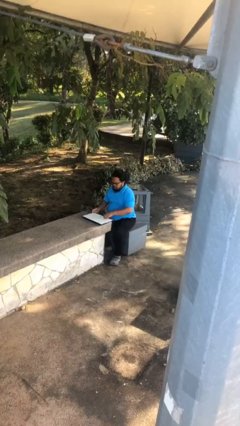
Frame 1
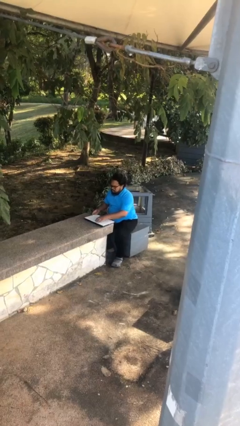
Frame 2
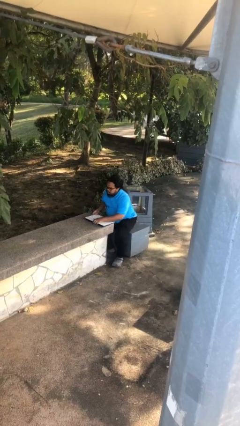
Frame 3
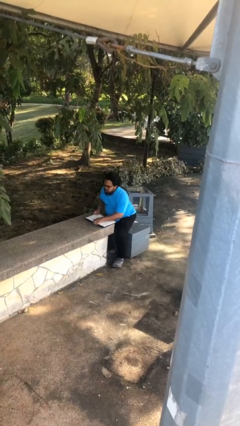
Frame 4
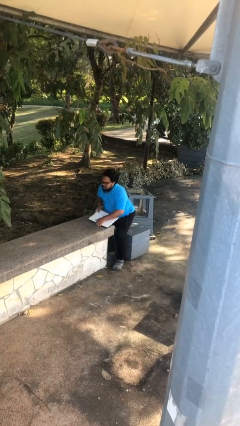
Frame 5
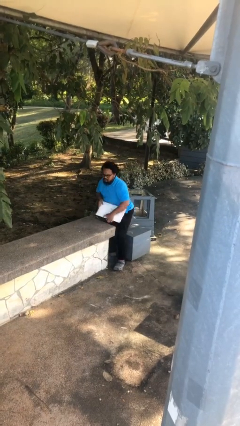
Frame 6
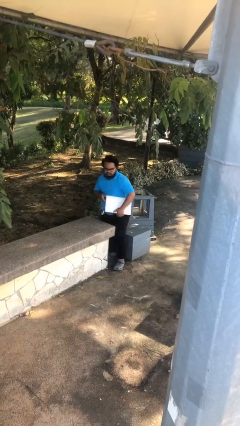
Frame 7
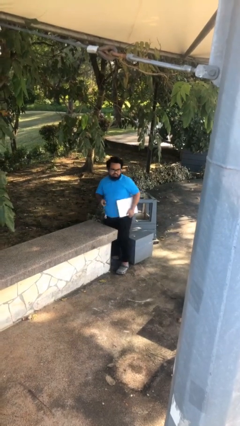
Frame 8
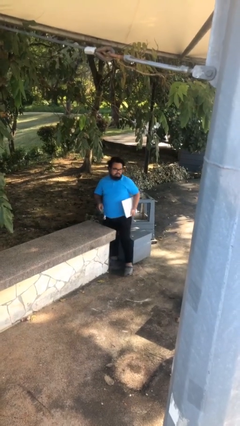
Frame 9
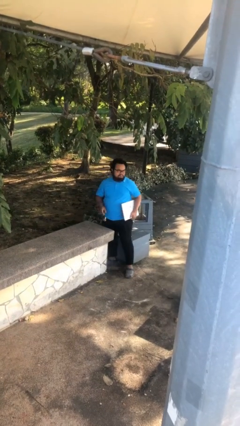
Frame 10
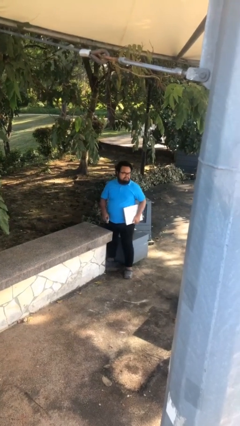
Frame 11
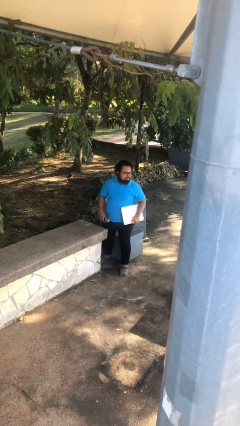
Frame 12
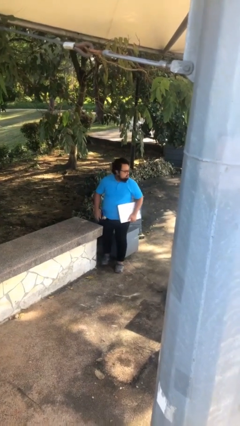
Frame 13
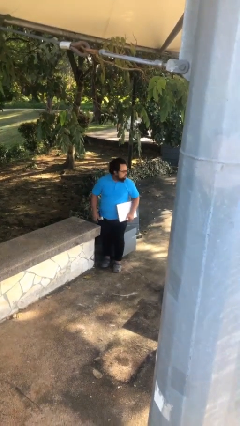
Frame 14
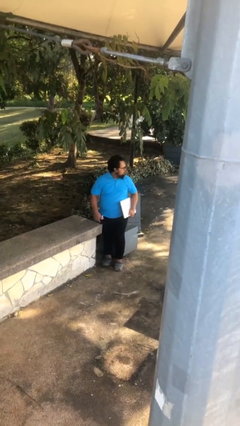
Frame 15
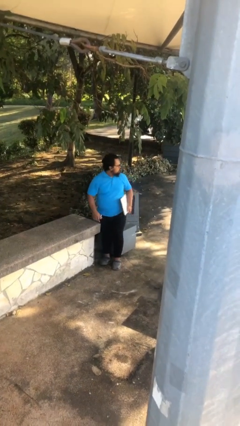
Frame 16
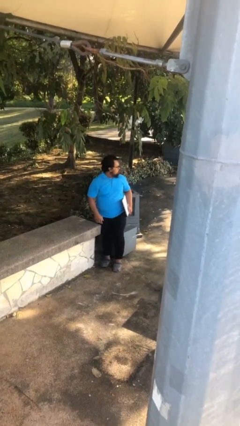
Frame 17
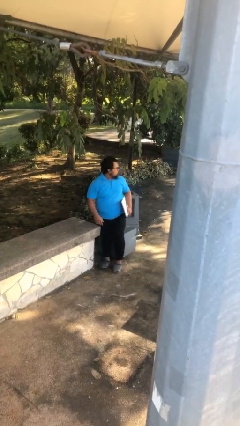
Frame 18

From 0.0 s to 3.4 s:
person stands up

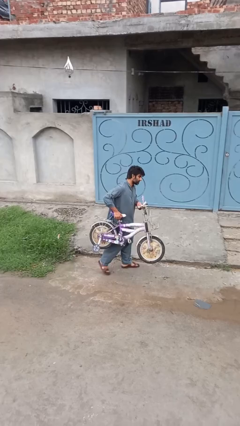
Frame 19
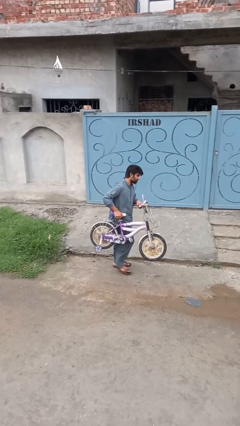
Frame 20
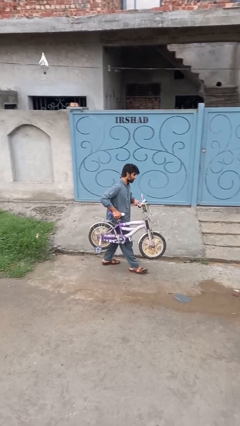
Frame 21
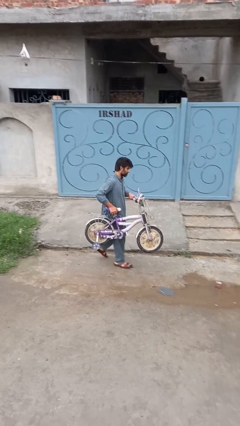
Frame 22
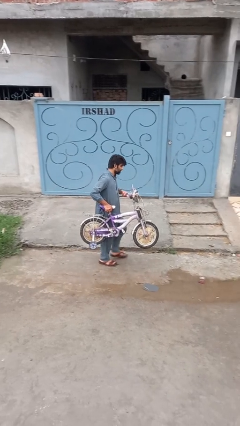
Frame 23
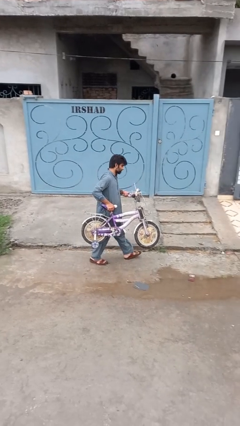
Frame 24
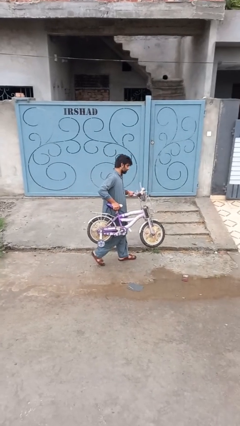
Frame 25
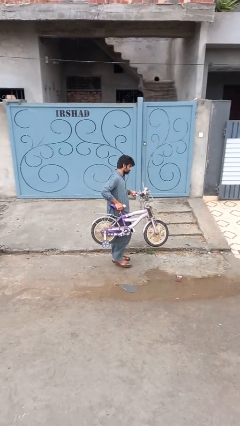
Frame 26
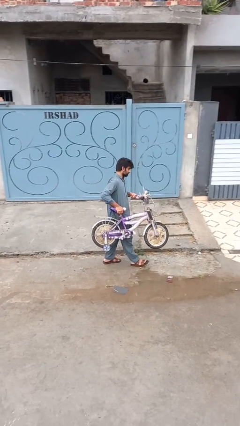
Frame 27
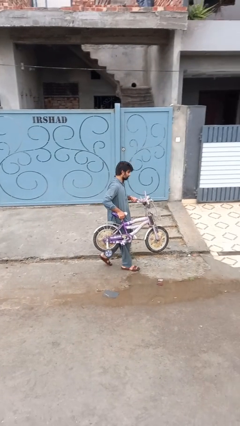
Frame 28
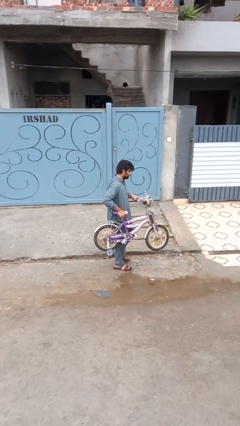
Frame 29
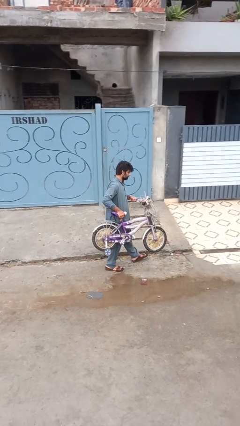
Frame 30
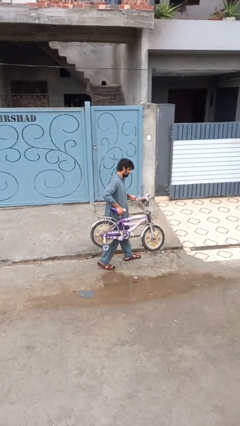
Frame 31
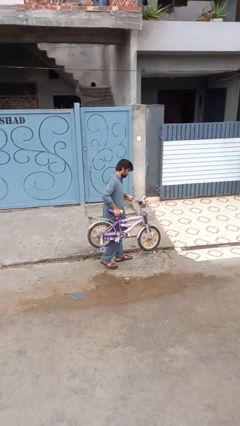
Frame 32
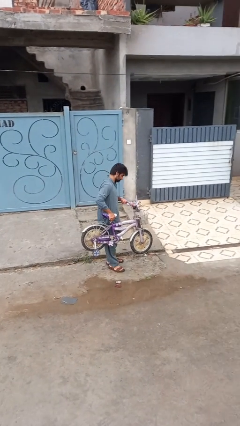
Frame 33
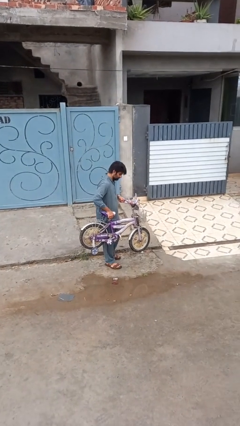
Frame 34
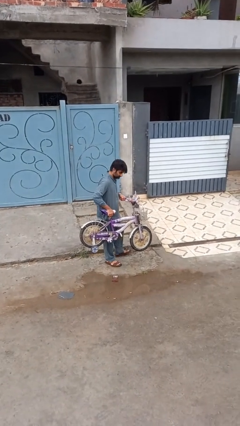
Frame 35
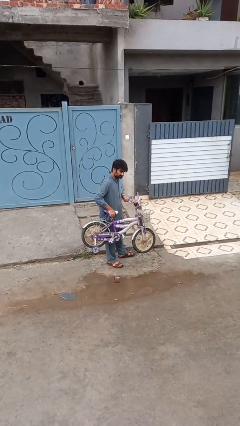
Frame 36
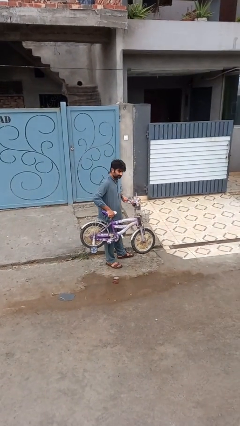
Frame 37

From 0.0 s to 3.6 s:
person carries bicycle

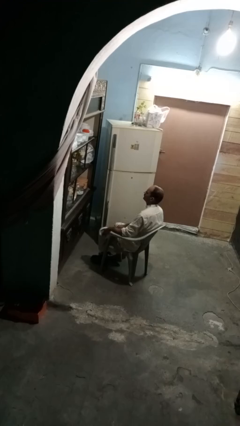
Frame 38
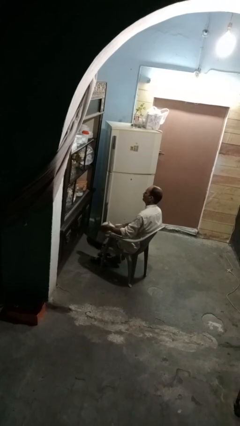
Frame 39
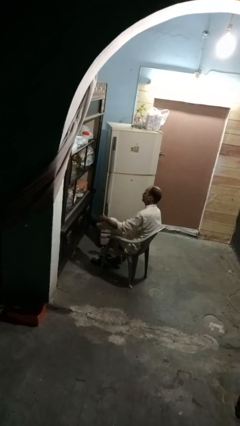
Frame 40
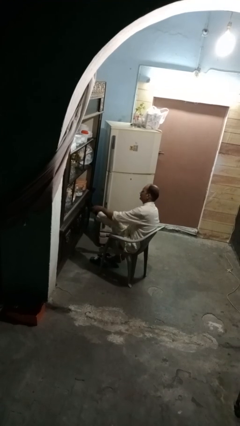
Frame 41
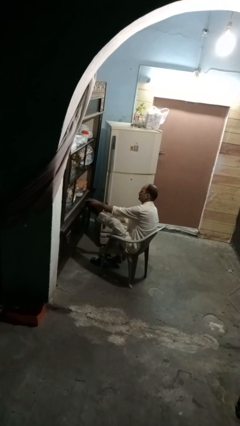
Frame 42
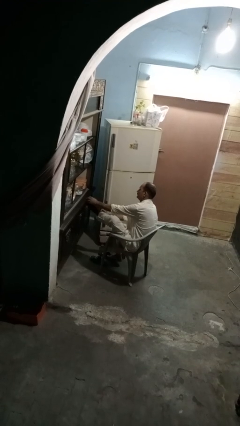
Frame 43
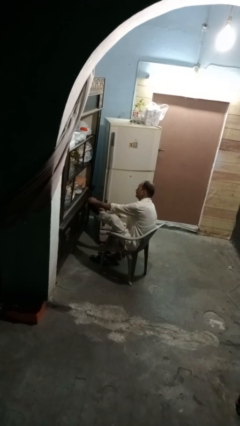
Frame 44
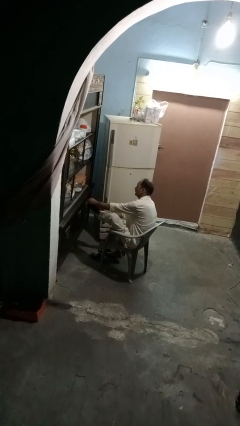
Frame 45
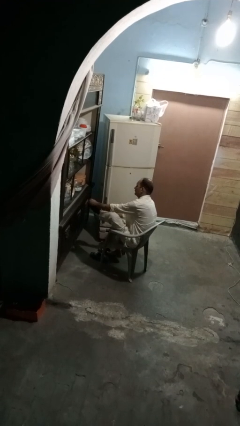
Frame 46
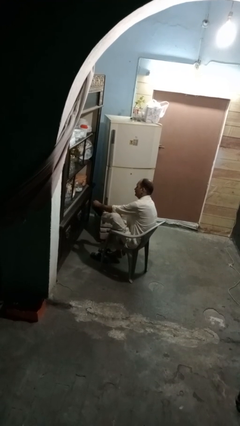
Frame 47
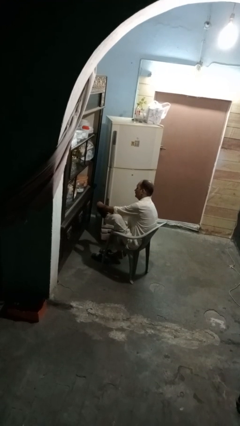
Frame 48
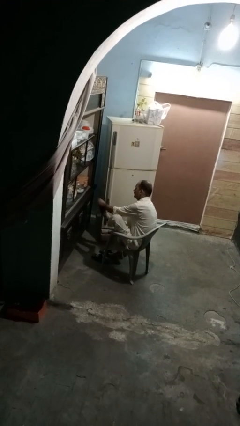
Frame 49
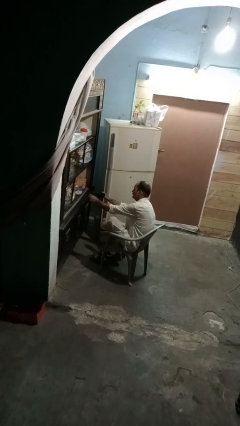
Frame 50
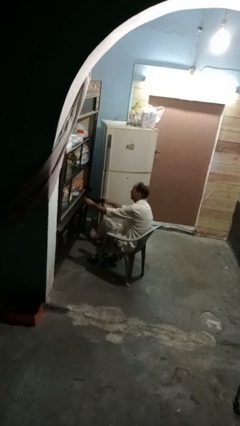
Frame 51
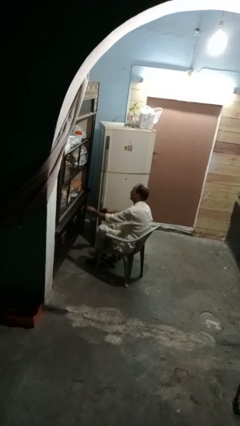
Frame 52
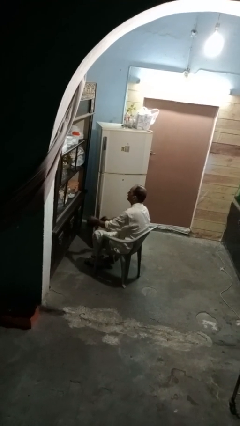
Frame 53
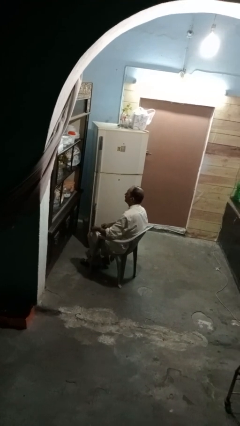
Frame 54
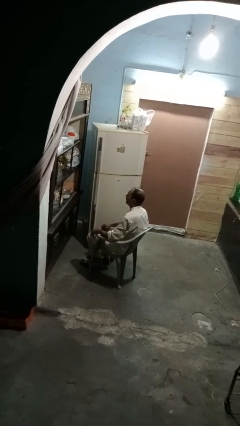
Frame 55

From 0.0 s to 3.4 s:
person takes off socks

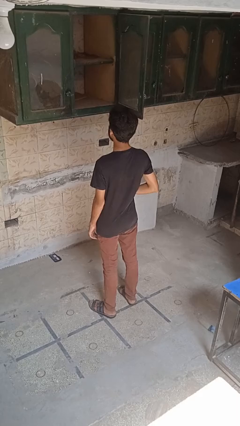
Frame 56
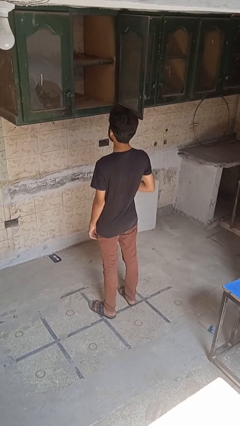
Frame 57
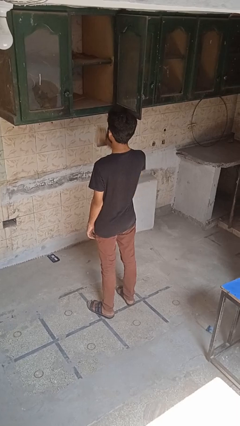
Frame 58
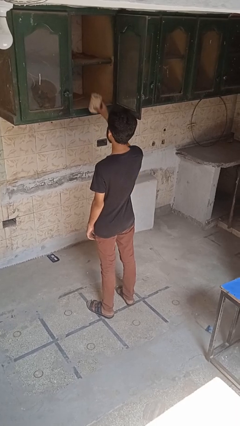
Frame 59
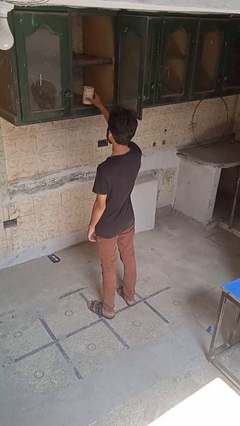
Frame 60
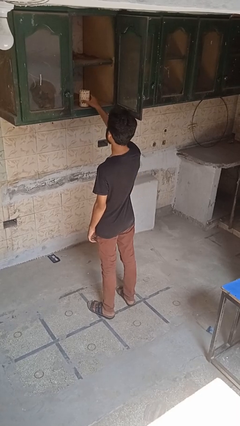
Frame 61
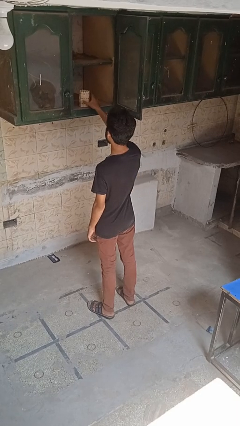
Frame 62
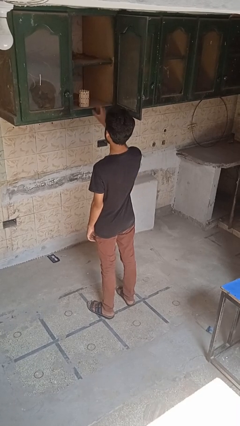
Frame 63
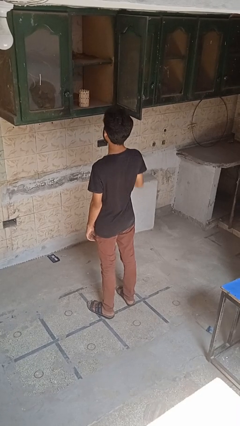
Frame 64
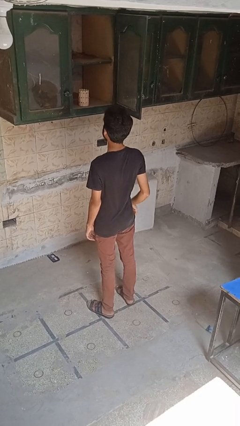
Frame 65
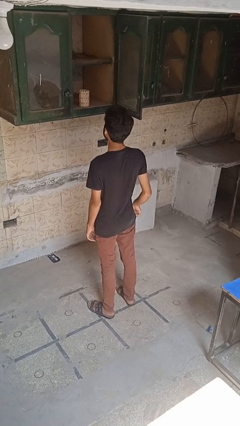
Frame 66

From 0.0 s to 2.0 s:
person puts down object into cabinet

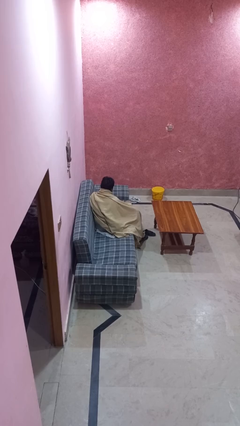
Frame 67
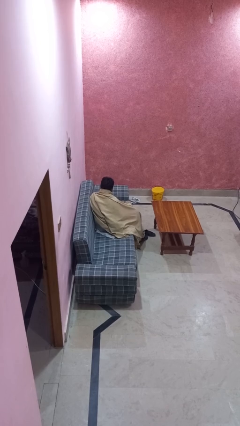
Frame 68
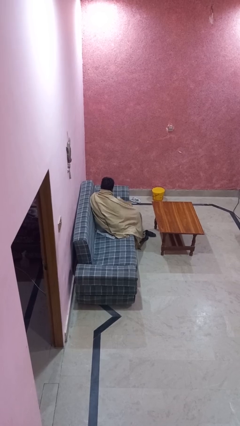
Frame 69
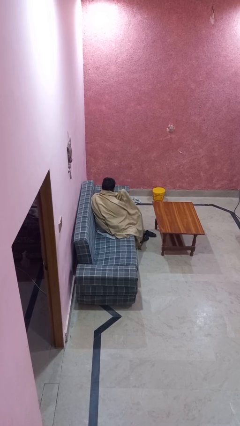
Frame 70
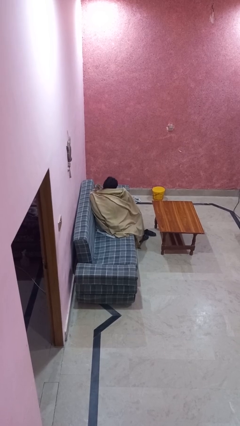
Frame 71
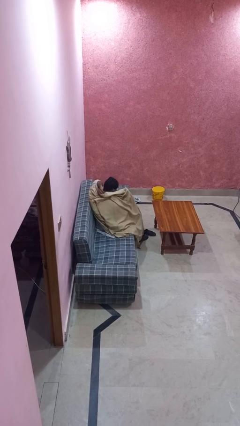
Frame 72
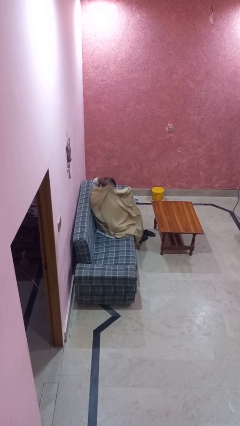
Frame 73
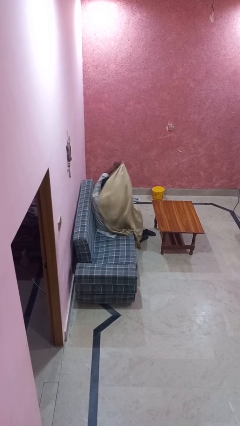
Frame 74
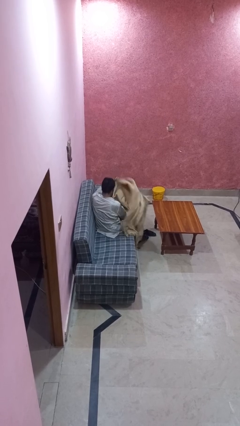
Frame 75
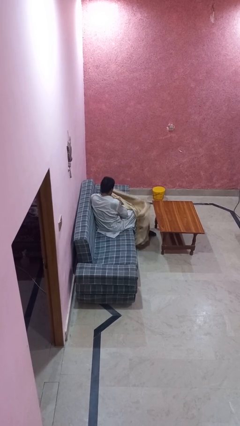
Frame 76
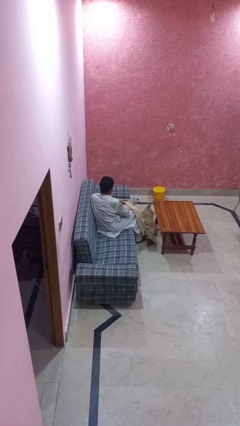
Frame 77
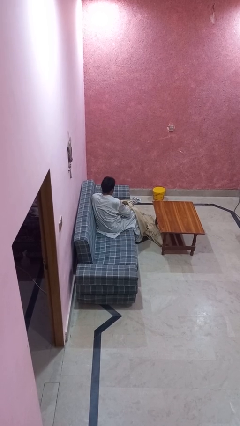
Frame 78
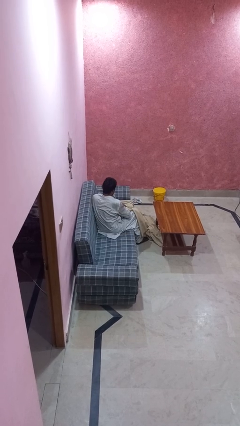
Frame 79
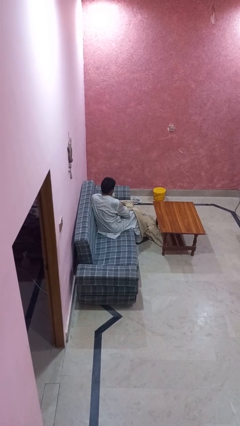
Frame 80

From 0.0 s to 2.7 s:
person uncovers with blanket

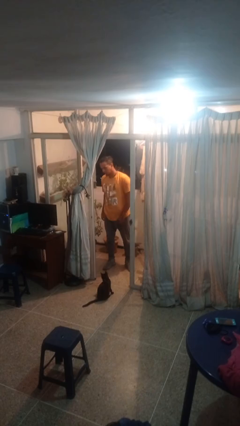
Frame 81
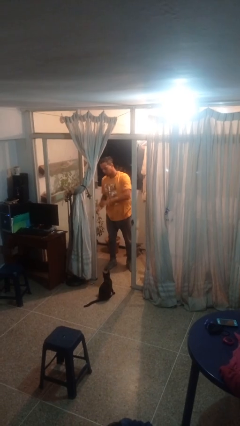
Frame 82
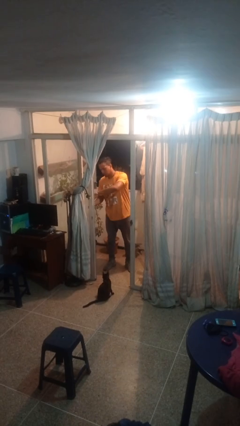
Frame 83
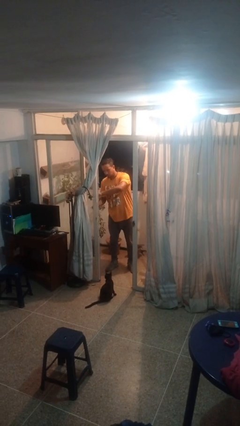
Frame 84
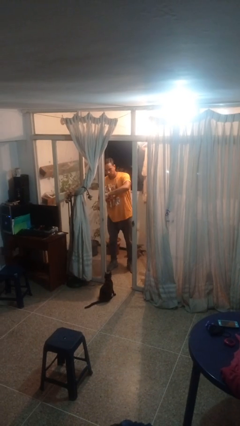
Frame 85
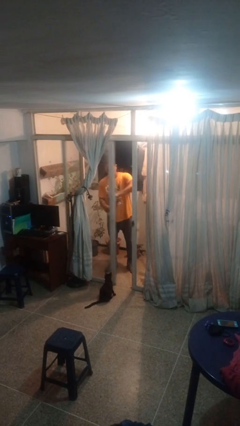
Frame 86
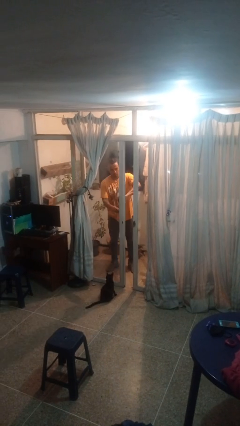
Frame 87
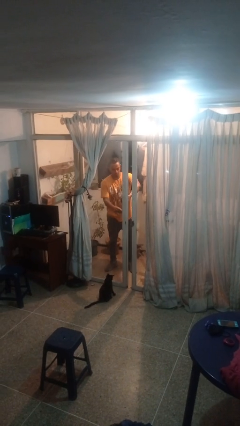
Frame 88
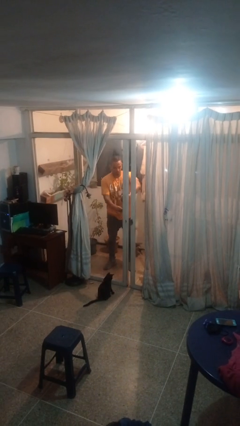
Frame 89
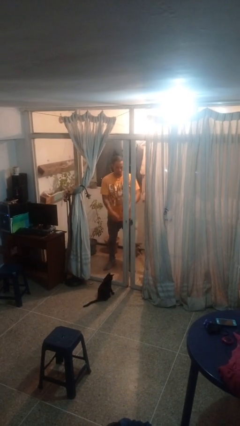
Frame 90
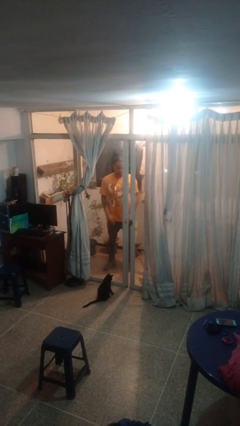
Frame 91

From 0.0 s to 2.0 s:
person closes sliding door

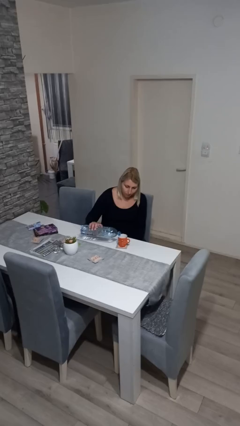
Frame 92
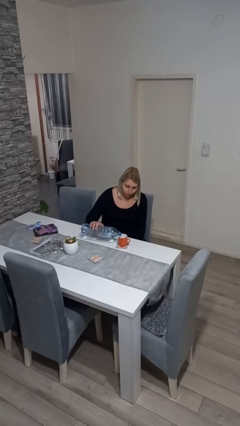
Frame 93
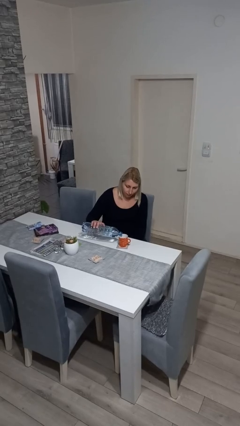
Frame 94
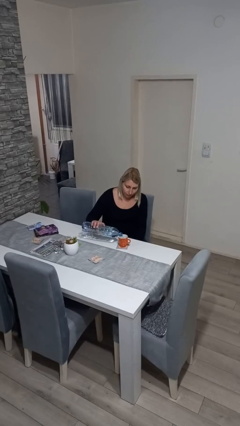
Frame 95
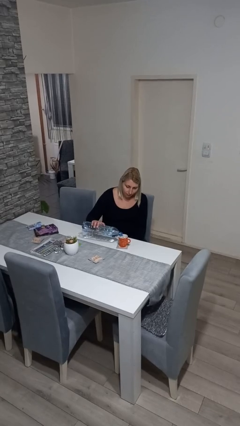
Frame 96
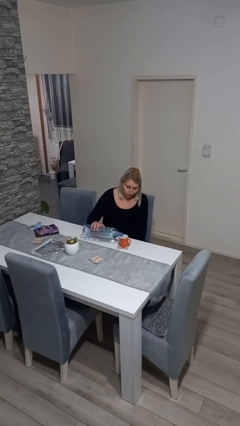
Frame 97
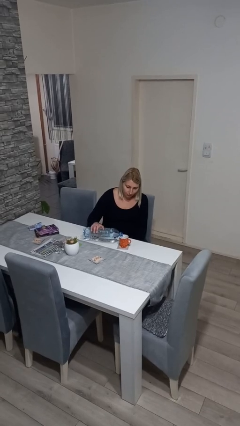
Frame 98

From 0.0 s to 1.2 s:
person pours liquid into cup
